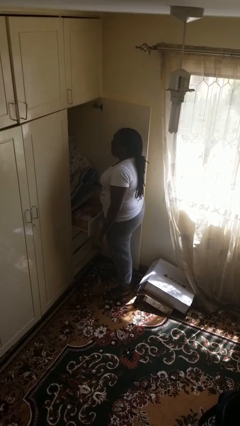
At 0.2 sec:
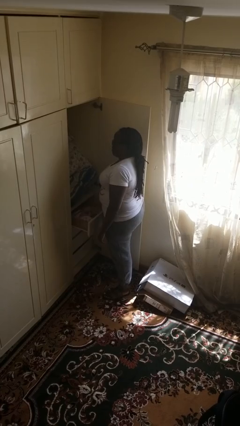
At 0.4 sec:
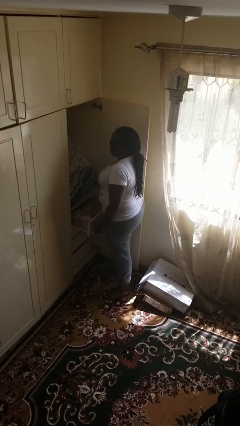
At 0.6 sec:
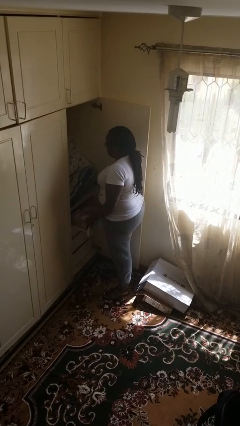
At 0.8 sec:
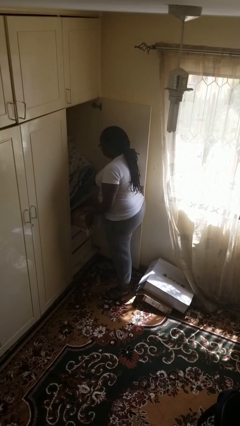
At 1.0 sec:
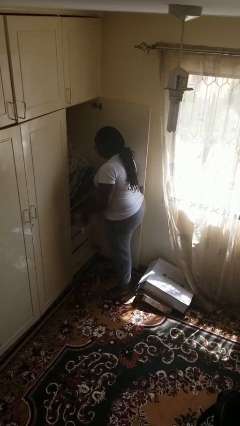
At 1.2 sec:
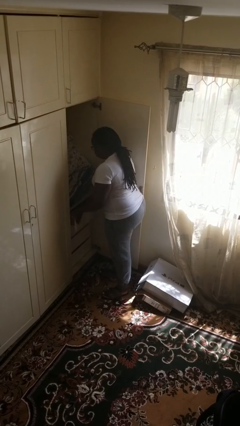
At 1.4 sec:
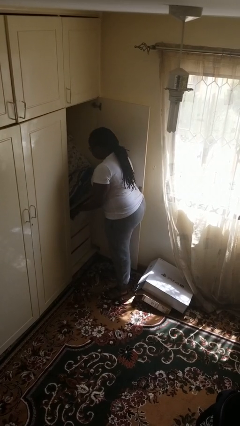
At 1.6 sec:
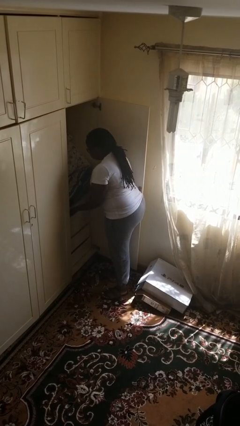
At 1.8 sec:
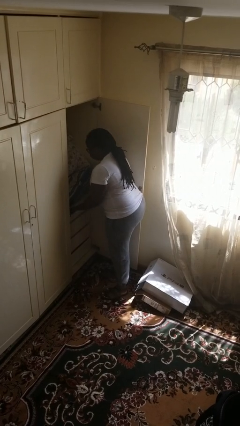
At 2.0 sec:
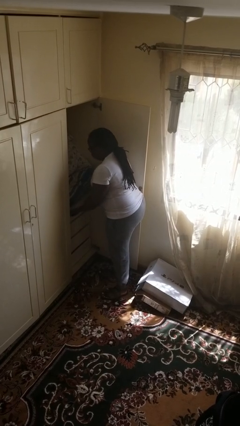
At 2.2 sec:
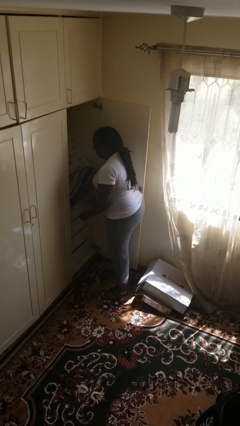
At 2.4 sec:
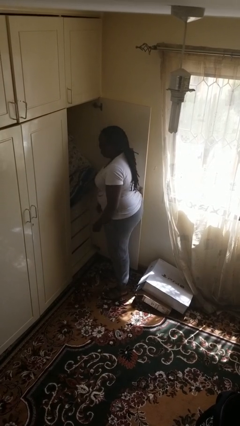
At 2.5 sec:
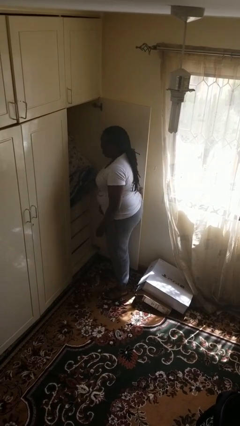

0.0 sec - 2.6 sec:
person closes dresser drawer

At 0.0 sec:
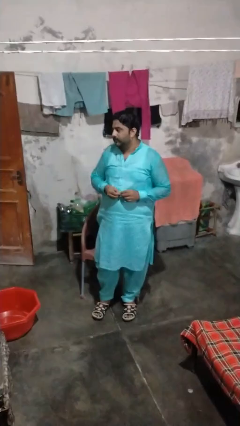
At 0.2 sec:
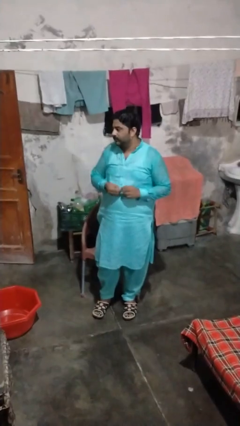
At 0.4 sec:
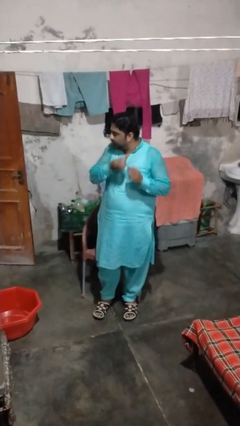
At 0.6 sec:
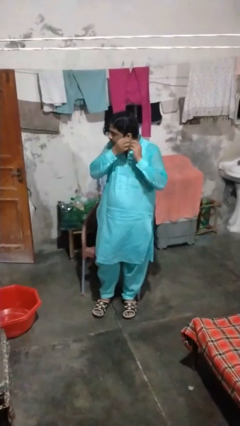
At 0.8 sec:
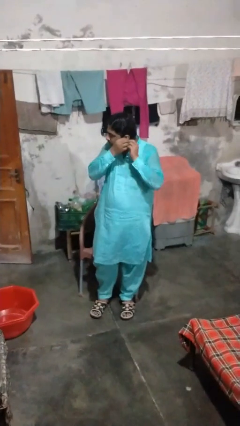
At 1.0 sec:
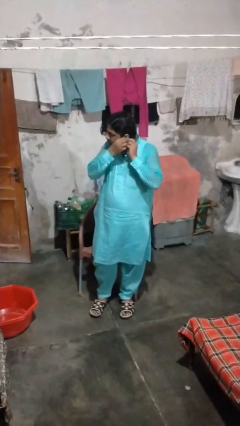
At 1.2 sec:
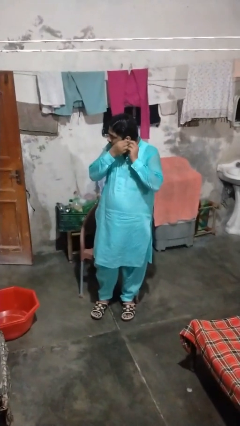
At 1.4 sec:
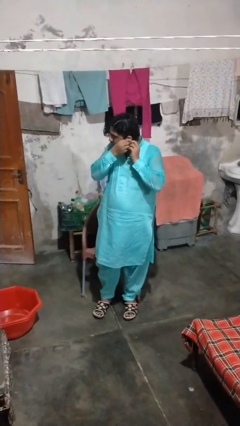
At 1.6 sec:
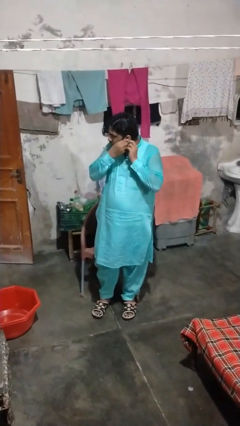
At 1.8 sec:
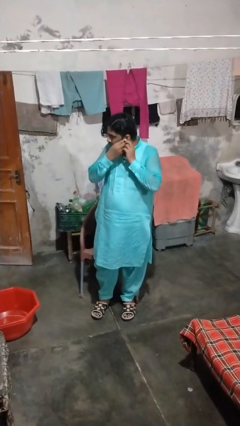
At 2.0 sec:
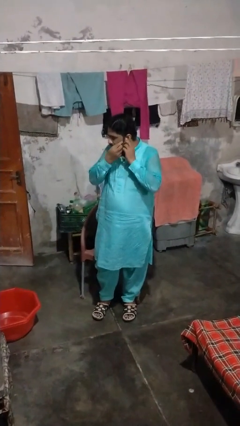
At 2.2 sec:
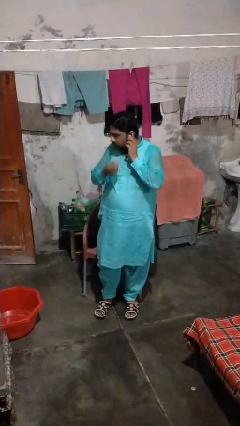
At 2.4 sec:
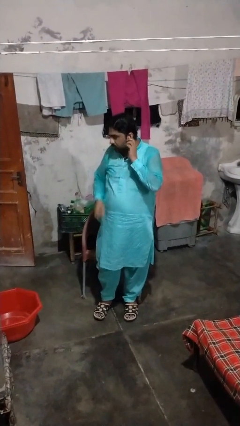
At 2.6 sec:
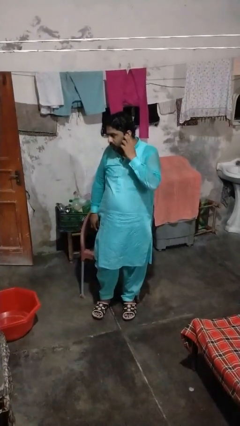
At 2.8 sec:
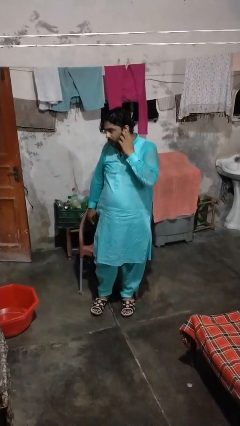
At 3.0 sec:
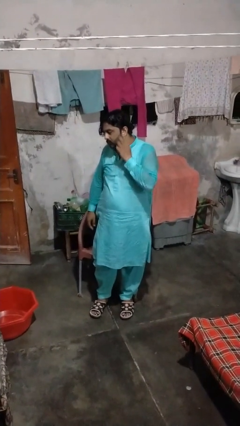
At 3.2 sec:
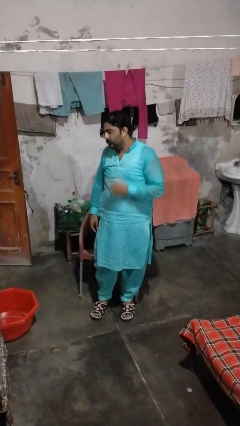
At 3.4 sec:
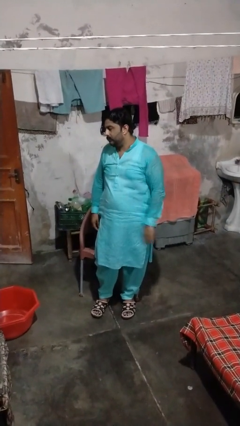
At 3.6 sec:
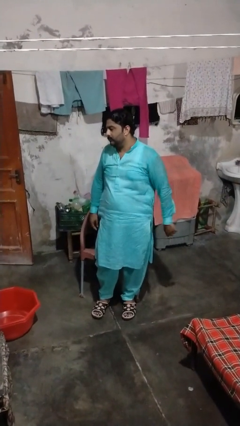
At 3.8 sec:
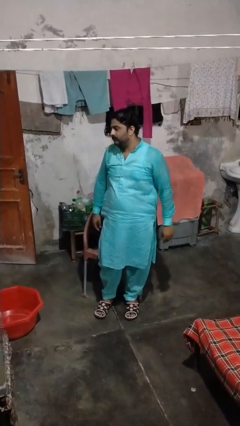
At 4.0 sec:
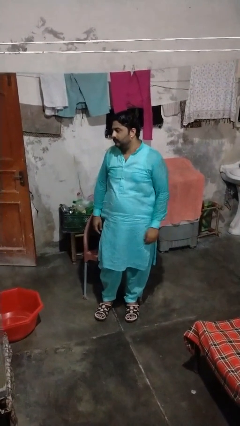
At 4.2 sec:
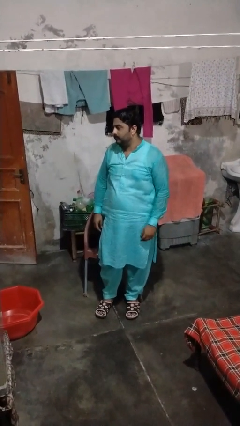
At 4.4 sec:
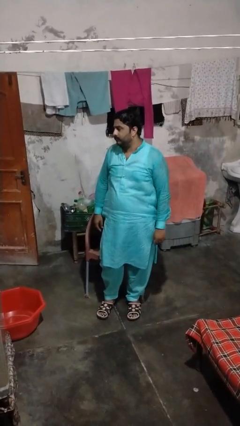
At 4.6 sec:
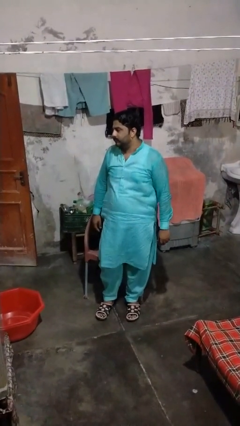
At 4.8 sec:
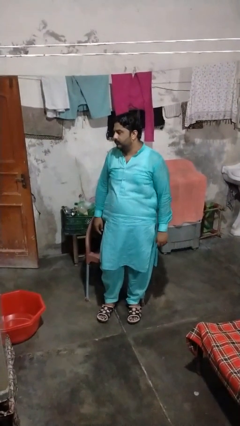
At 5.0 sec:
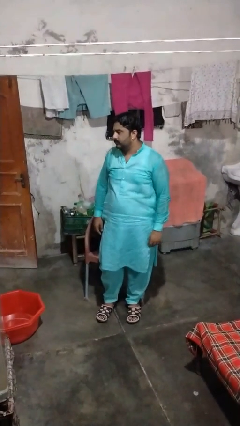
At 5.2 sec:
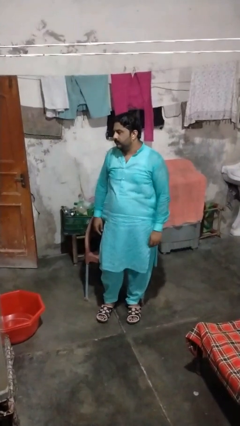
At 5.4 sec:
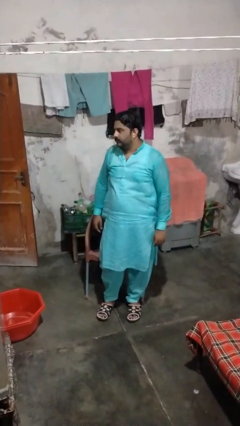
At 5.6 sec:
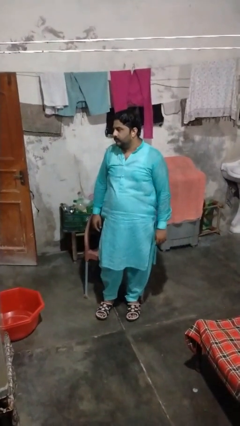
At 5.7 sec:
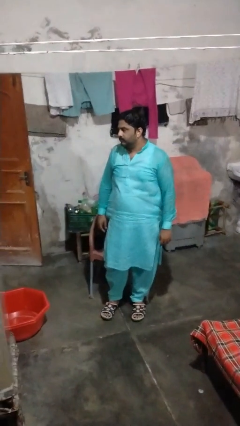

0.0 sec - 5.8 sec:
person puts on earrings

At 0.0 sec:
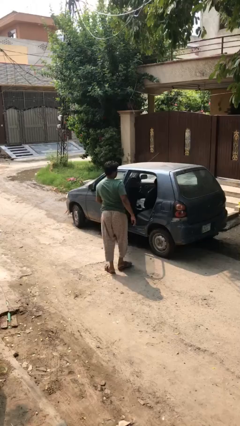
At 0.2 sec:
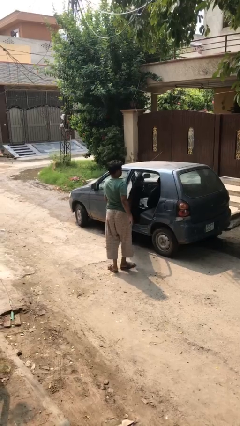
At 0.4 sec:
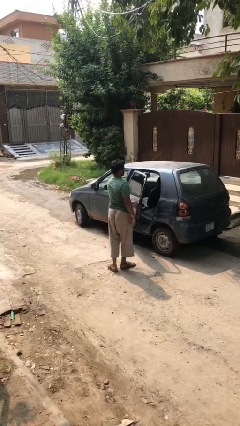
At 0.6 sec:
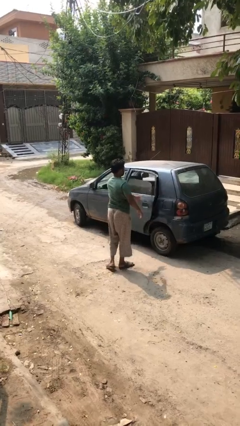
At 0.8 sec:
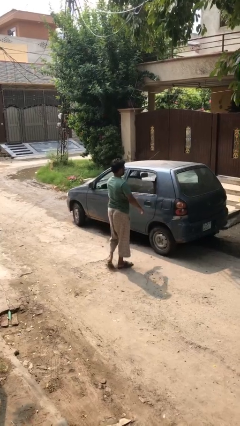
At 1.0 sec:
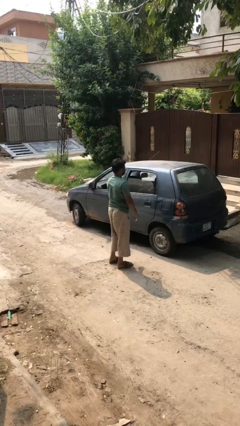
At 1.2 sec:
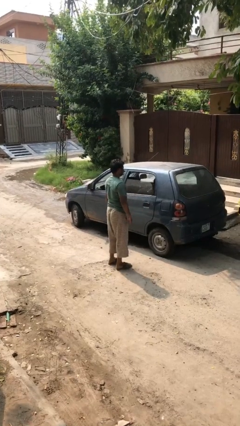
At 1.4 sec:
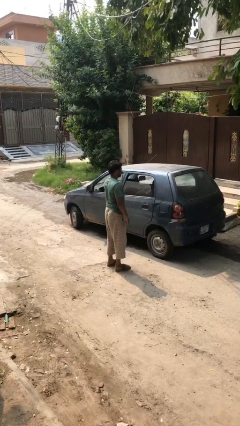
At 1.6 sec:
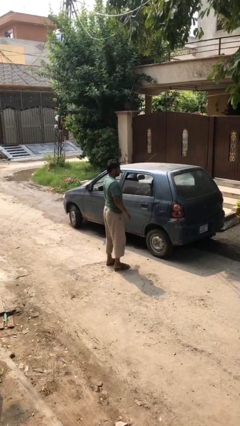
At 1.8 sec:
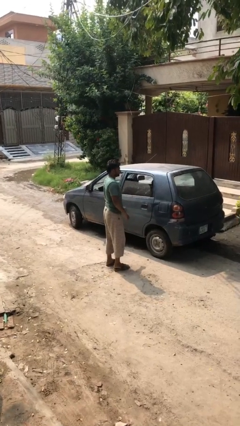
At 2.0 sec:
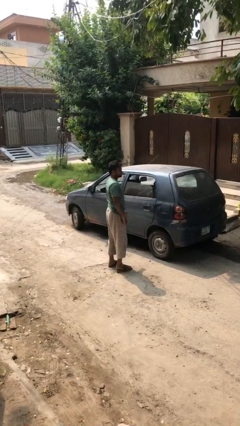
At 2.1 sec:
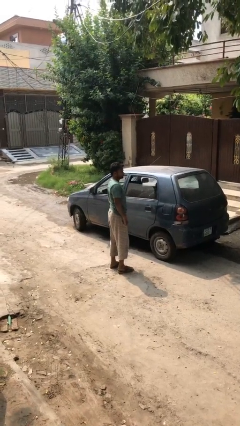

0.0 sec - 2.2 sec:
person closes car door

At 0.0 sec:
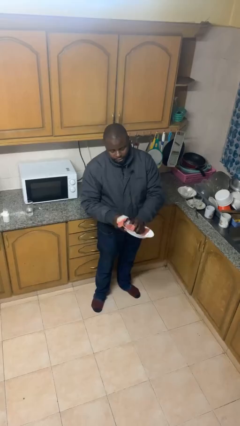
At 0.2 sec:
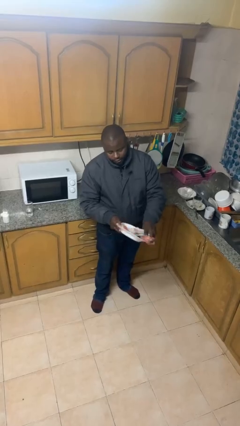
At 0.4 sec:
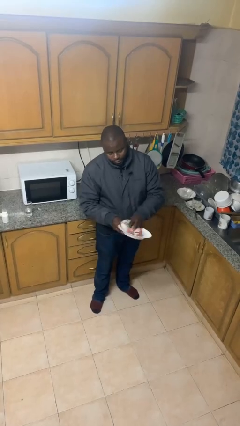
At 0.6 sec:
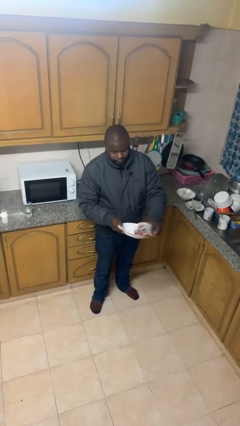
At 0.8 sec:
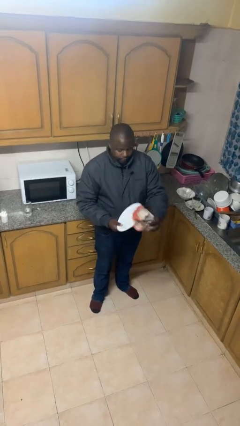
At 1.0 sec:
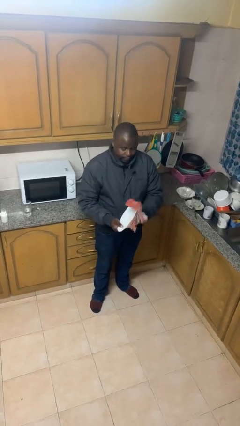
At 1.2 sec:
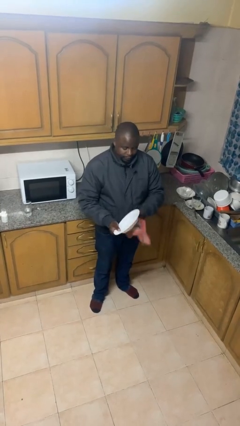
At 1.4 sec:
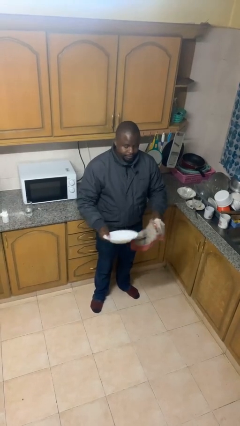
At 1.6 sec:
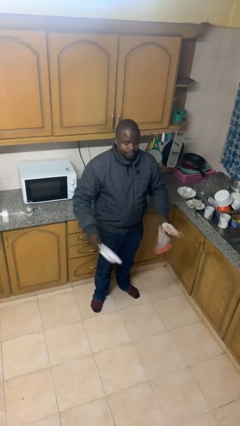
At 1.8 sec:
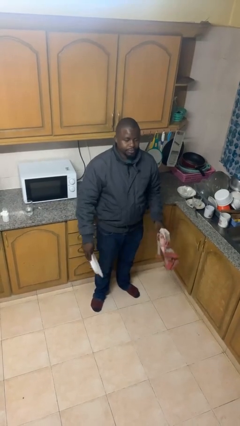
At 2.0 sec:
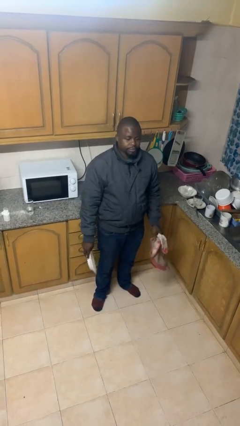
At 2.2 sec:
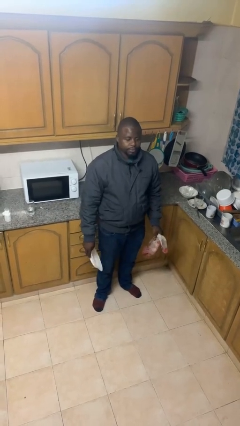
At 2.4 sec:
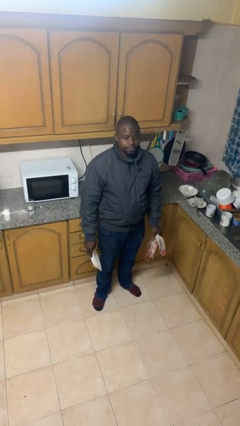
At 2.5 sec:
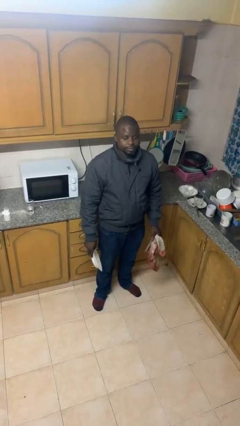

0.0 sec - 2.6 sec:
person dries dish

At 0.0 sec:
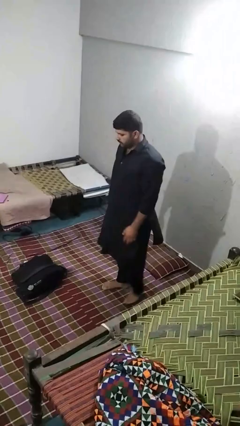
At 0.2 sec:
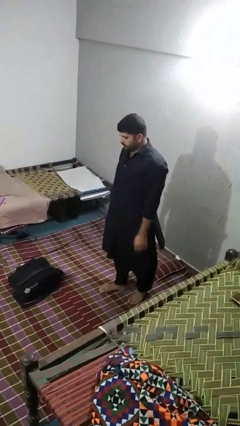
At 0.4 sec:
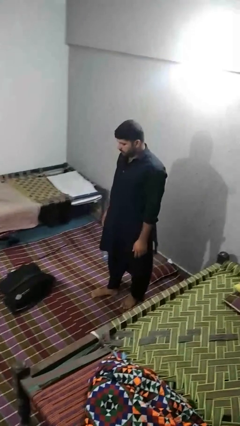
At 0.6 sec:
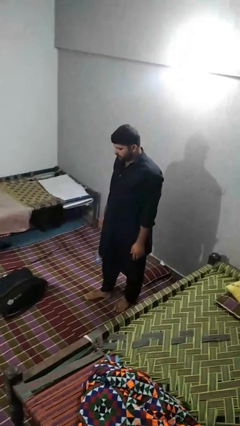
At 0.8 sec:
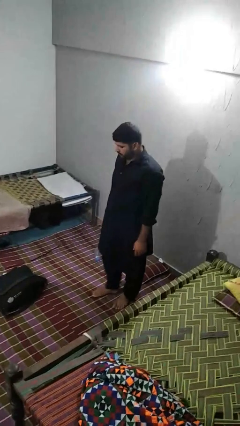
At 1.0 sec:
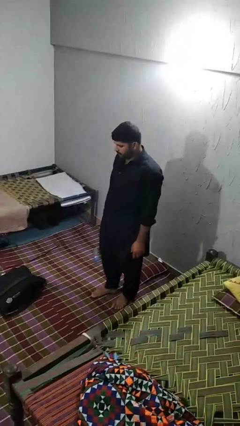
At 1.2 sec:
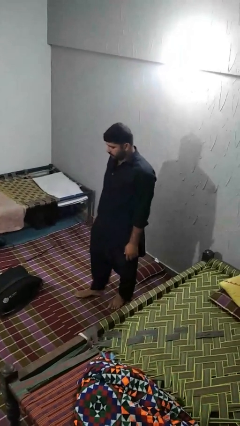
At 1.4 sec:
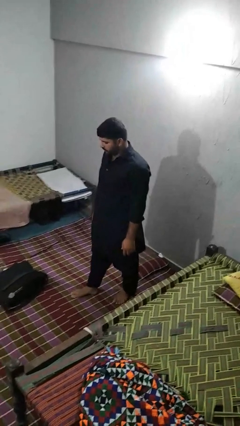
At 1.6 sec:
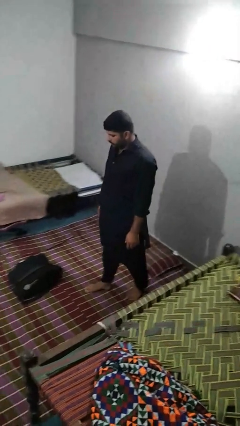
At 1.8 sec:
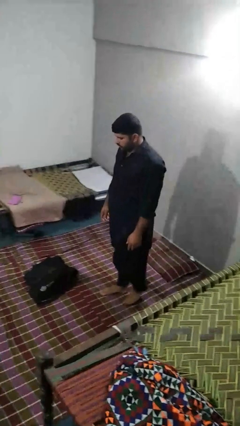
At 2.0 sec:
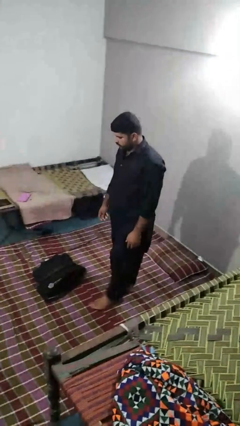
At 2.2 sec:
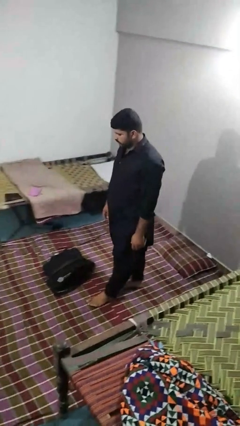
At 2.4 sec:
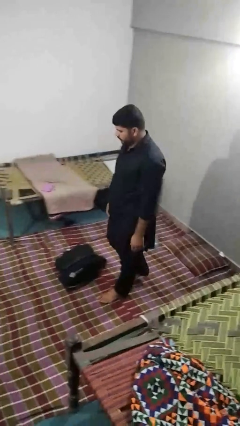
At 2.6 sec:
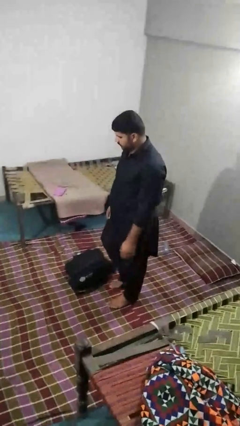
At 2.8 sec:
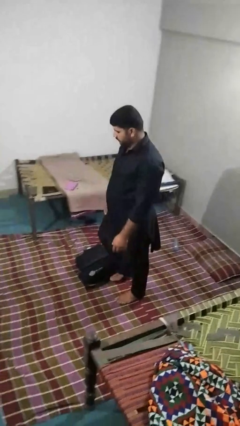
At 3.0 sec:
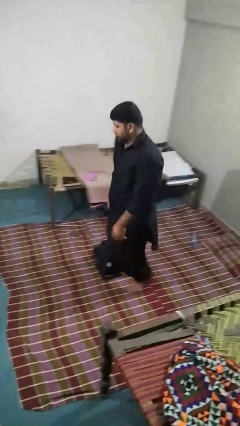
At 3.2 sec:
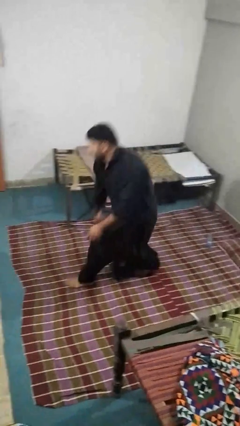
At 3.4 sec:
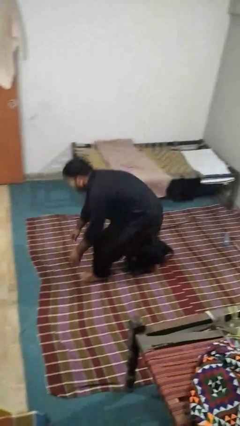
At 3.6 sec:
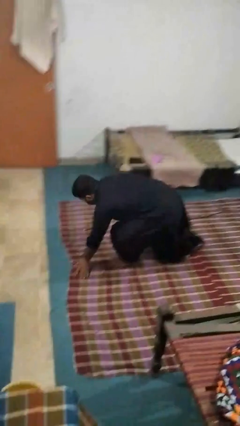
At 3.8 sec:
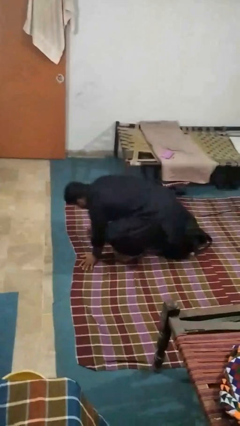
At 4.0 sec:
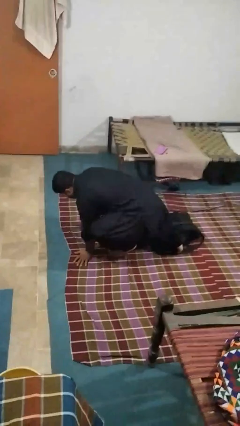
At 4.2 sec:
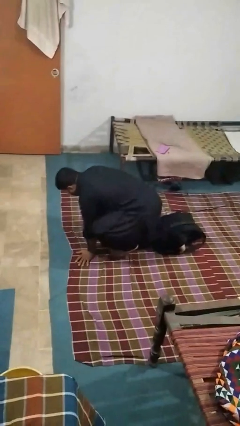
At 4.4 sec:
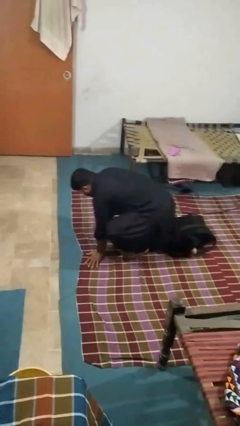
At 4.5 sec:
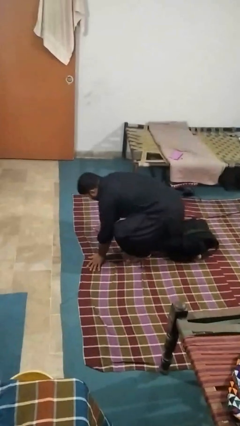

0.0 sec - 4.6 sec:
person trips on object on floor
